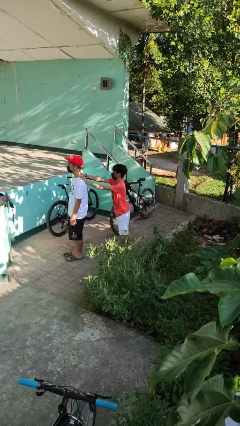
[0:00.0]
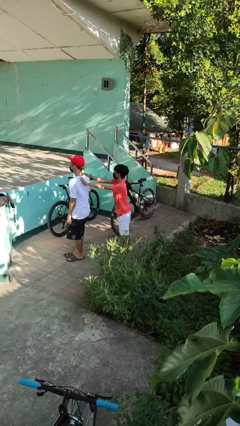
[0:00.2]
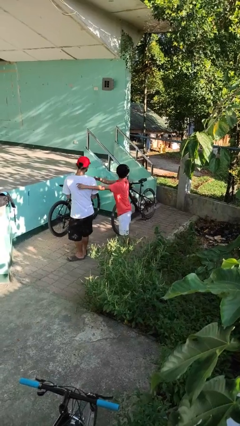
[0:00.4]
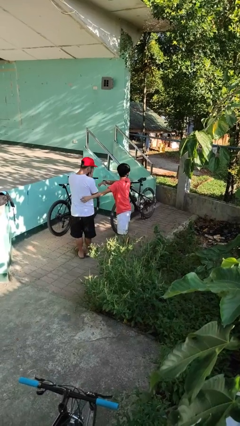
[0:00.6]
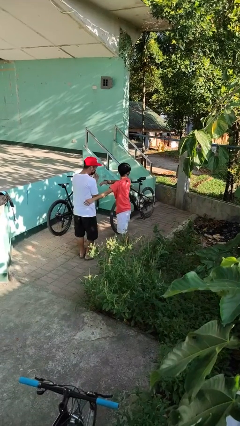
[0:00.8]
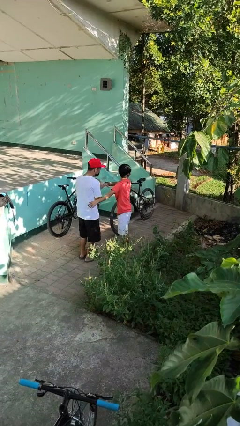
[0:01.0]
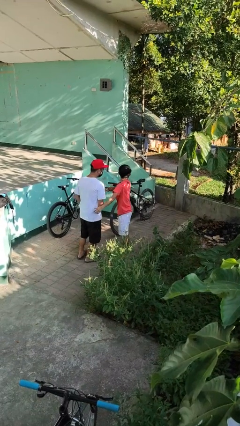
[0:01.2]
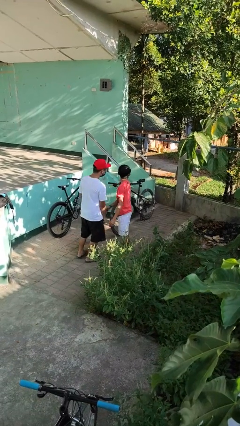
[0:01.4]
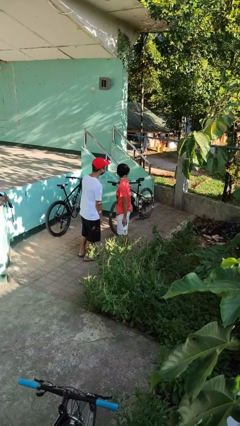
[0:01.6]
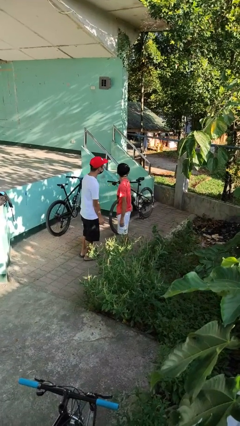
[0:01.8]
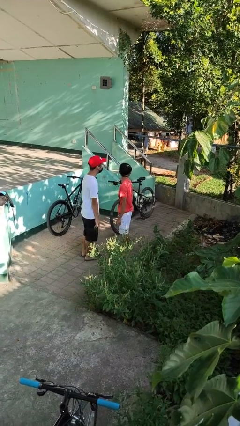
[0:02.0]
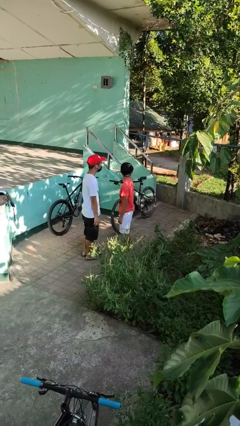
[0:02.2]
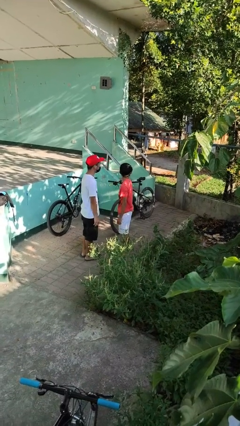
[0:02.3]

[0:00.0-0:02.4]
person spins person around

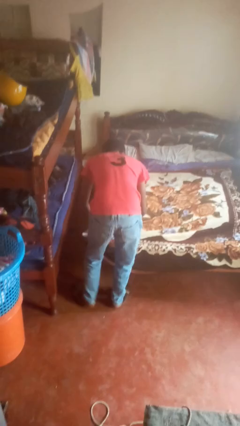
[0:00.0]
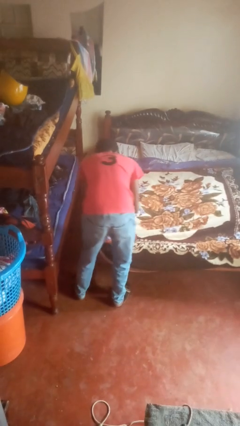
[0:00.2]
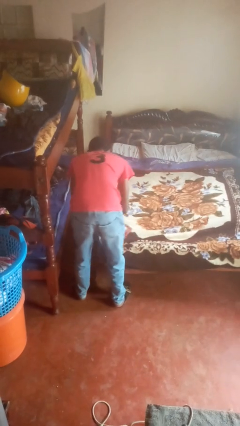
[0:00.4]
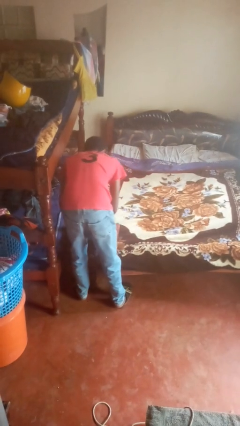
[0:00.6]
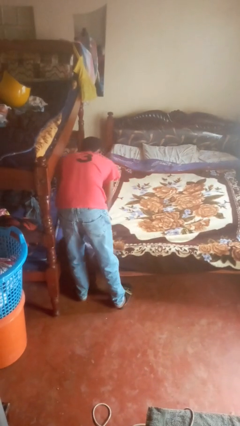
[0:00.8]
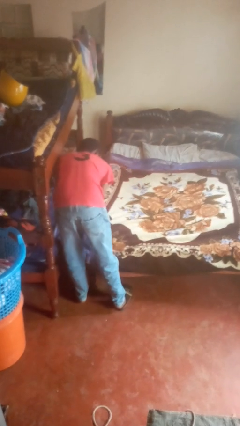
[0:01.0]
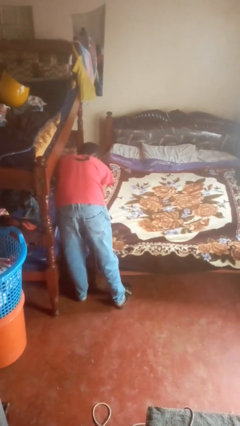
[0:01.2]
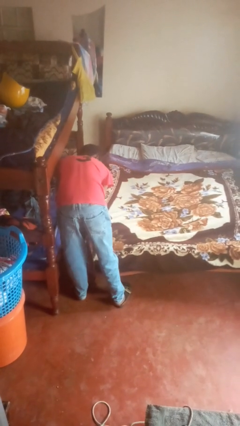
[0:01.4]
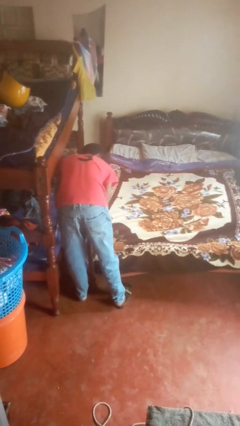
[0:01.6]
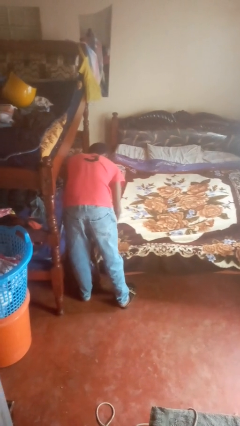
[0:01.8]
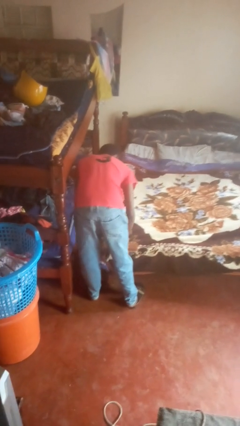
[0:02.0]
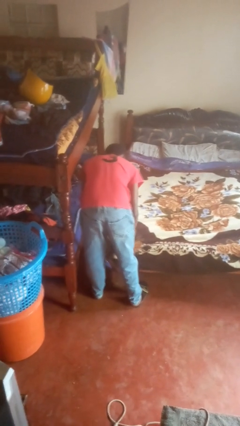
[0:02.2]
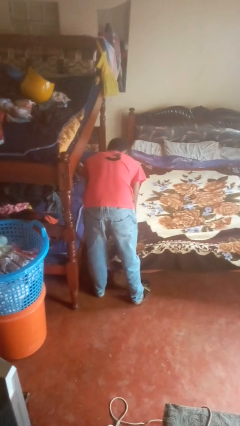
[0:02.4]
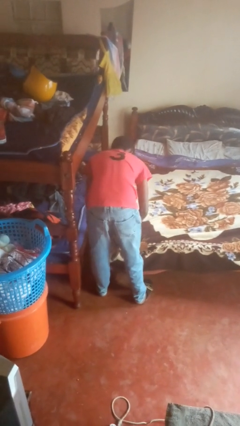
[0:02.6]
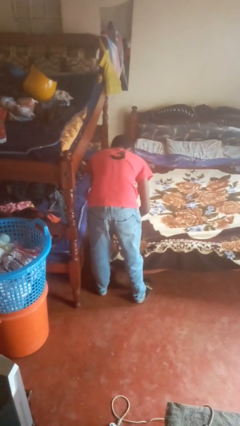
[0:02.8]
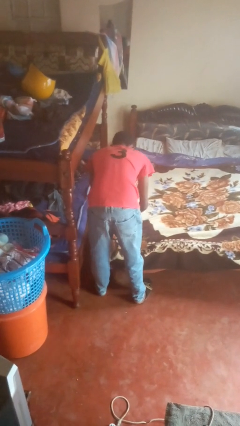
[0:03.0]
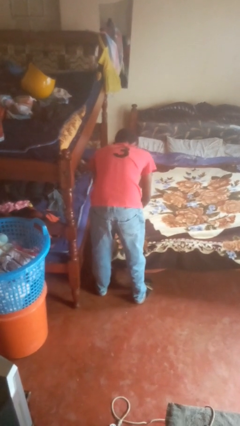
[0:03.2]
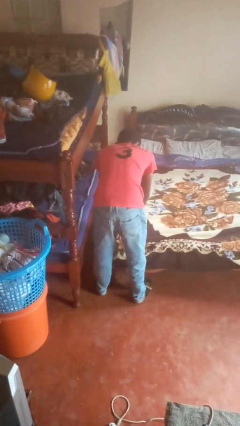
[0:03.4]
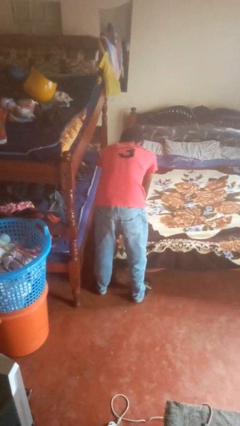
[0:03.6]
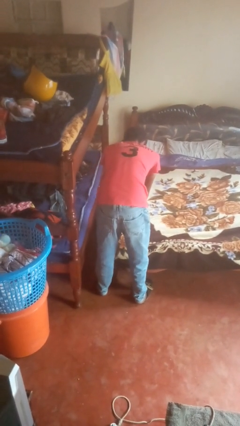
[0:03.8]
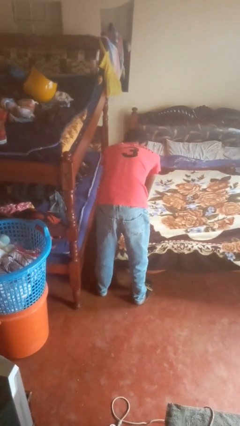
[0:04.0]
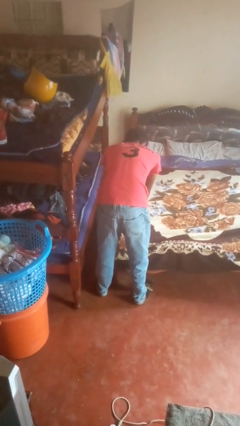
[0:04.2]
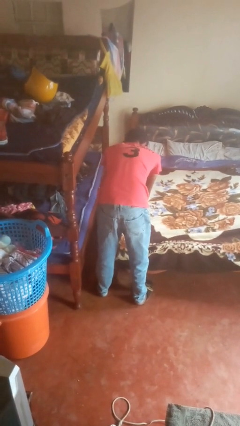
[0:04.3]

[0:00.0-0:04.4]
person makes bed

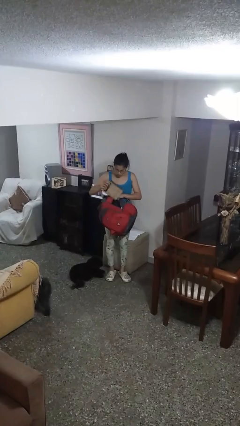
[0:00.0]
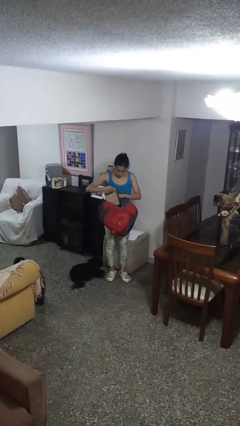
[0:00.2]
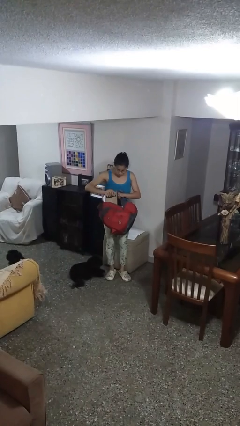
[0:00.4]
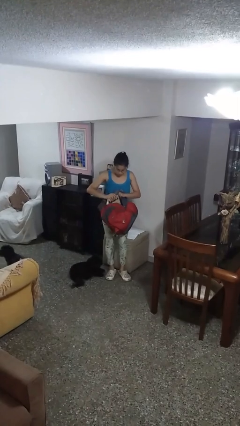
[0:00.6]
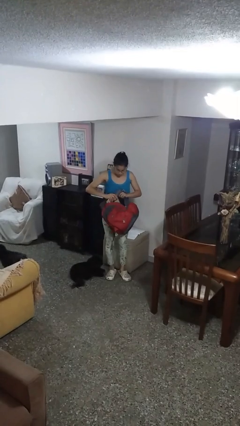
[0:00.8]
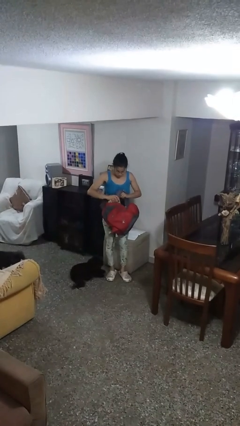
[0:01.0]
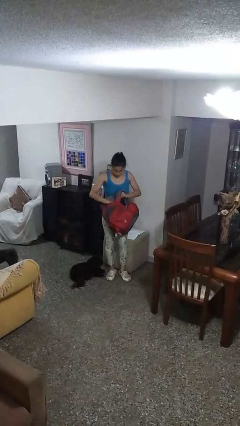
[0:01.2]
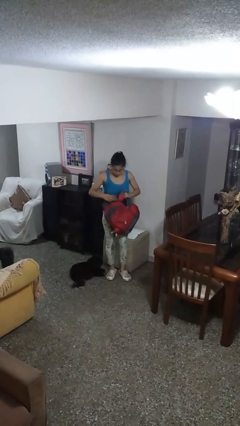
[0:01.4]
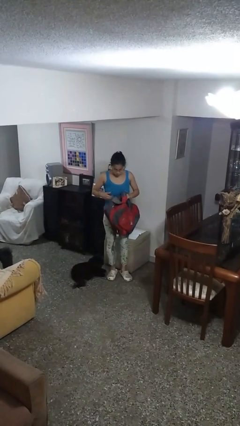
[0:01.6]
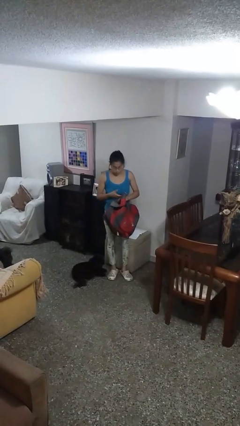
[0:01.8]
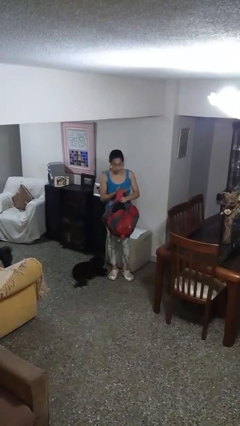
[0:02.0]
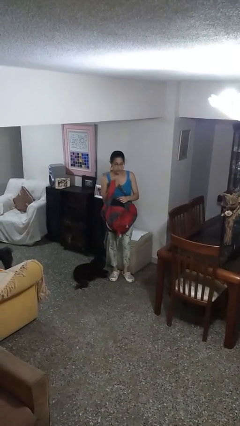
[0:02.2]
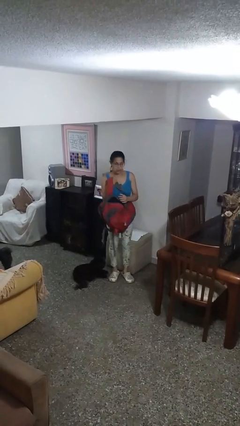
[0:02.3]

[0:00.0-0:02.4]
person puts object into backpack

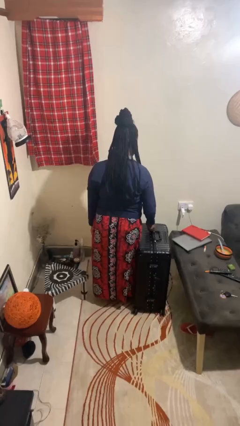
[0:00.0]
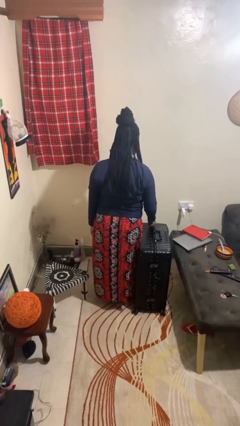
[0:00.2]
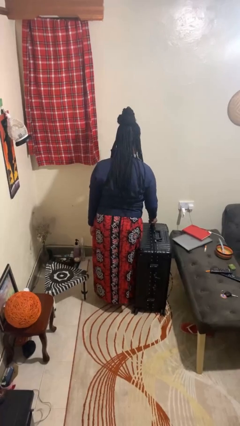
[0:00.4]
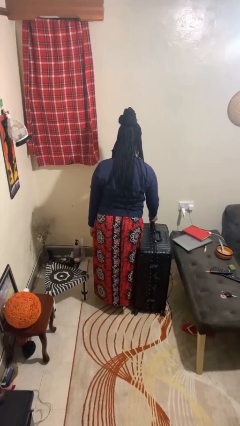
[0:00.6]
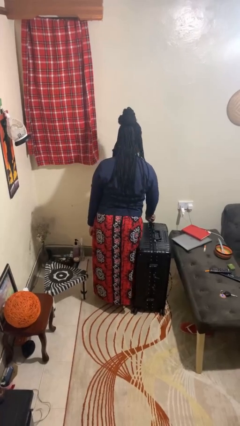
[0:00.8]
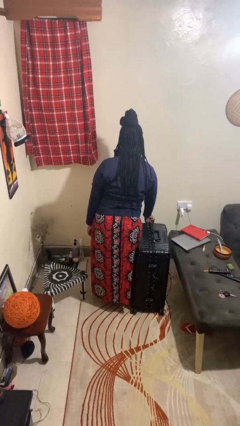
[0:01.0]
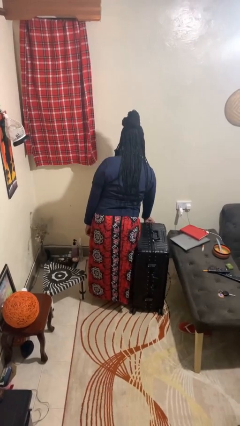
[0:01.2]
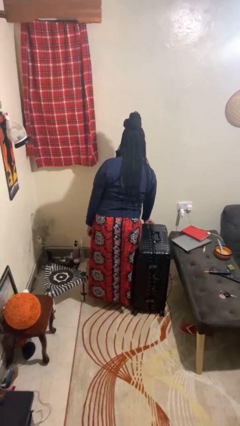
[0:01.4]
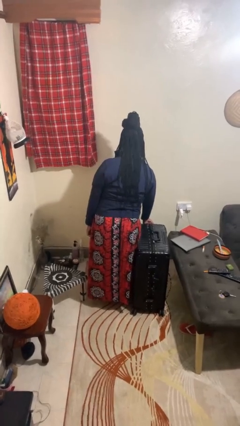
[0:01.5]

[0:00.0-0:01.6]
person closes suitcase

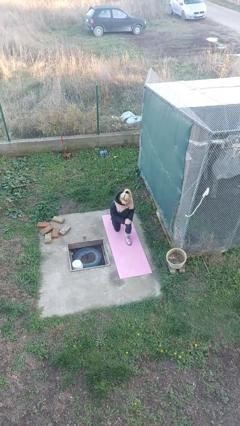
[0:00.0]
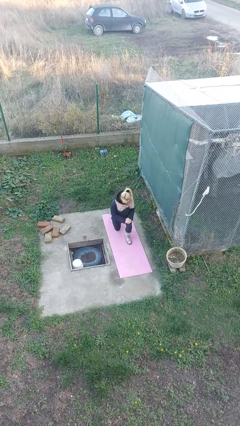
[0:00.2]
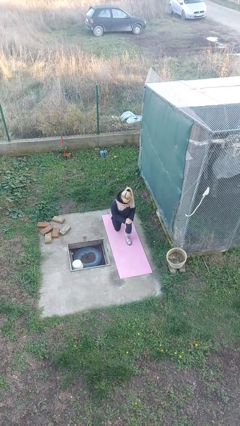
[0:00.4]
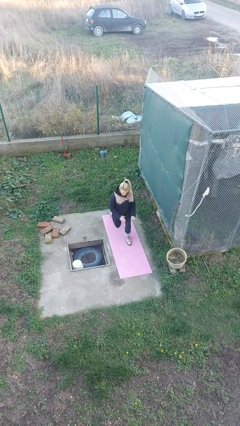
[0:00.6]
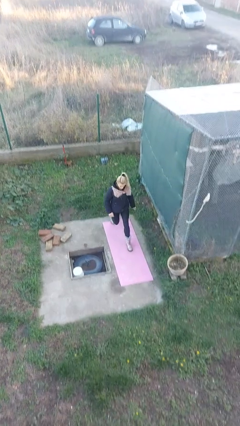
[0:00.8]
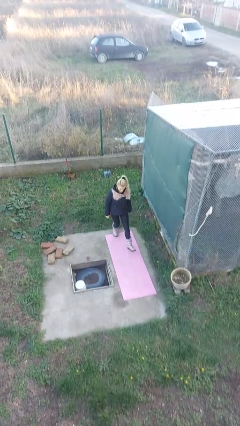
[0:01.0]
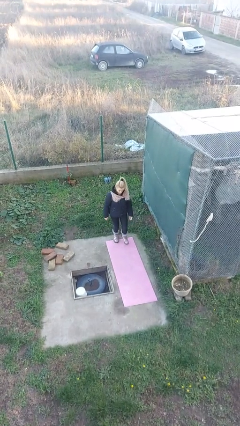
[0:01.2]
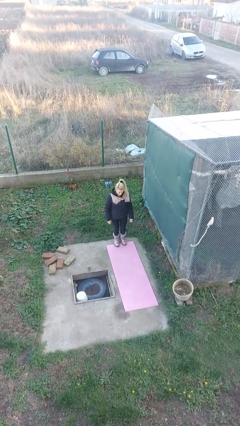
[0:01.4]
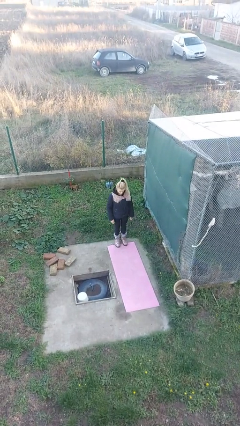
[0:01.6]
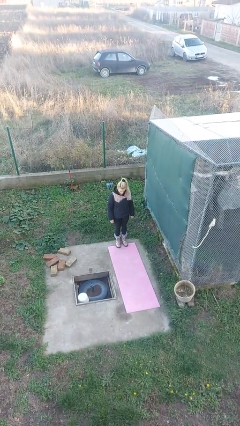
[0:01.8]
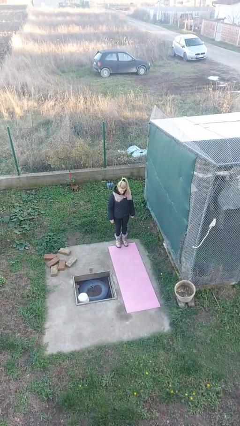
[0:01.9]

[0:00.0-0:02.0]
person stands up from floor

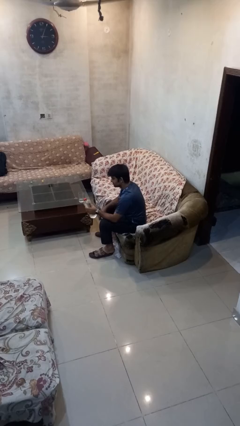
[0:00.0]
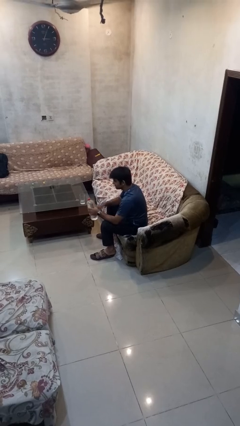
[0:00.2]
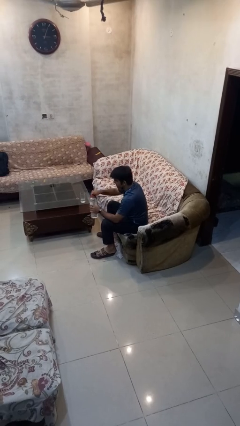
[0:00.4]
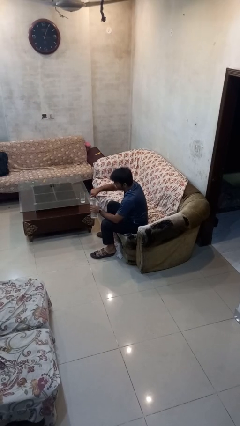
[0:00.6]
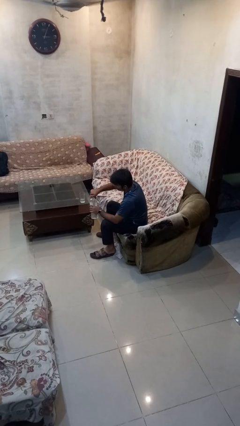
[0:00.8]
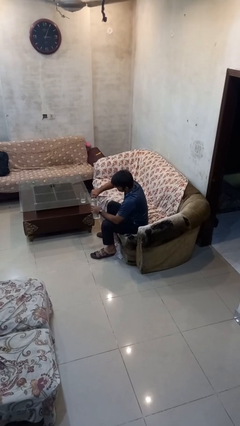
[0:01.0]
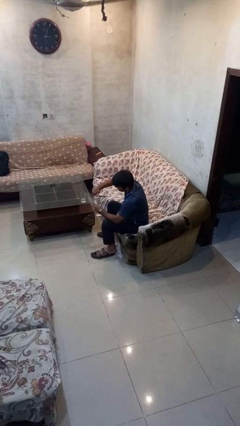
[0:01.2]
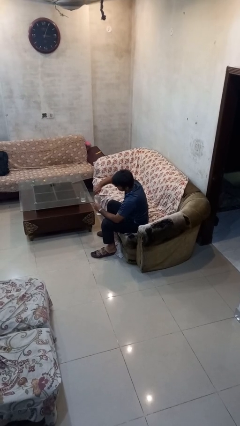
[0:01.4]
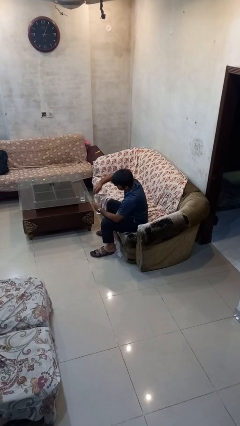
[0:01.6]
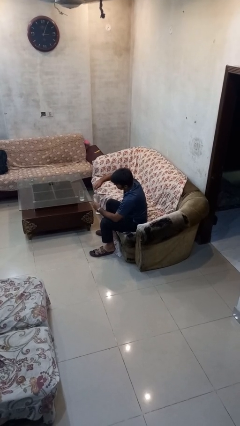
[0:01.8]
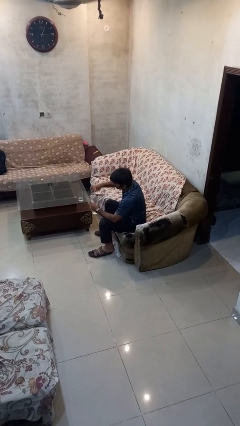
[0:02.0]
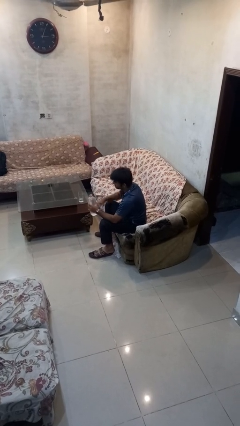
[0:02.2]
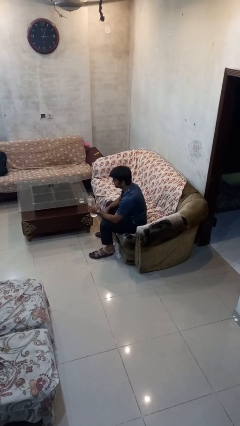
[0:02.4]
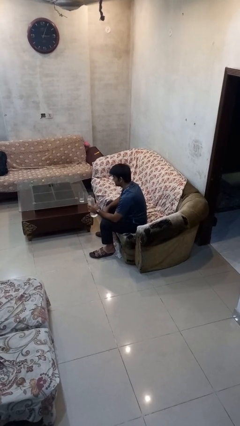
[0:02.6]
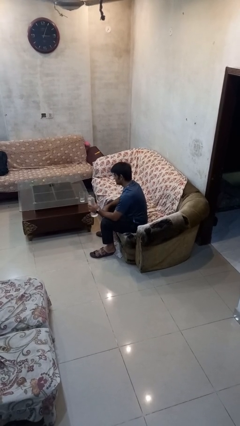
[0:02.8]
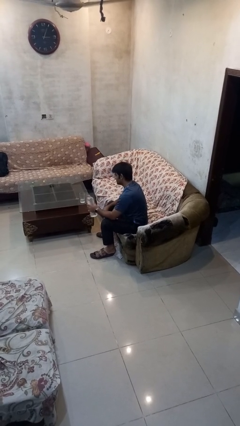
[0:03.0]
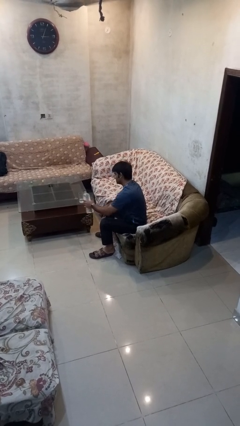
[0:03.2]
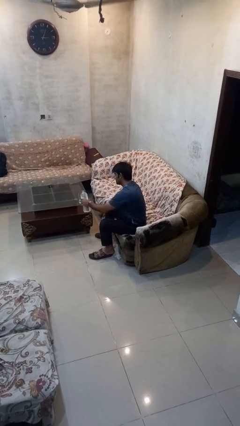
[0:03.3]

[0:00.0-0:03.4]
person unscrews lid from bottle

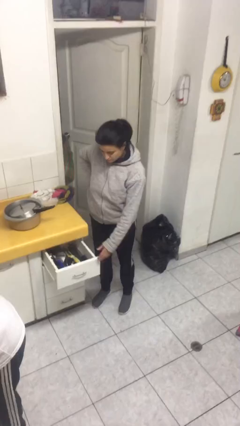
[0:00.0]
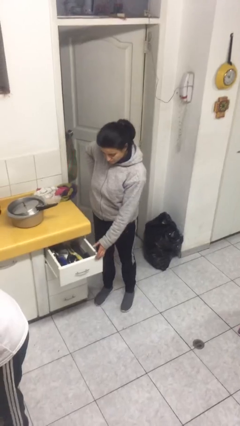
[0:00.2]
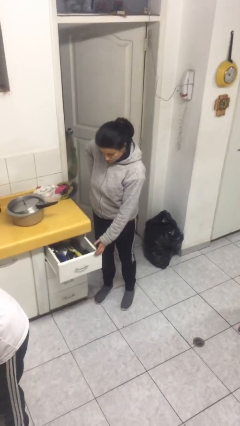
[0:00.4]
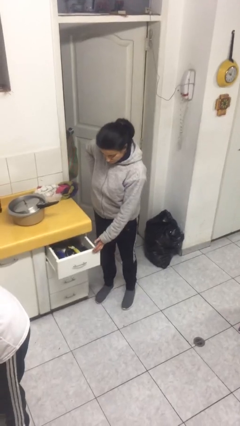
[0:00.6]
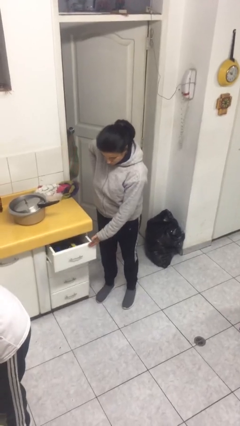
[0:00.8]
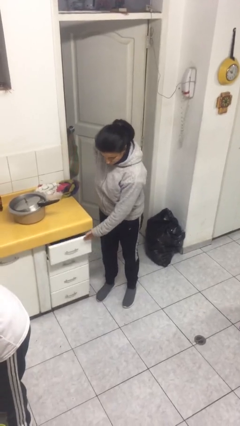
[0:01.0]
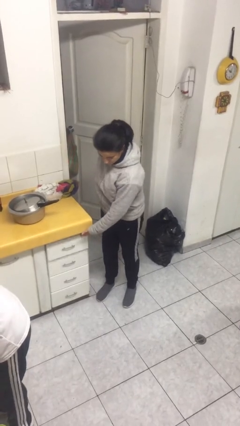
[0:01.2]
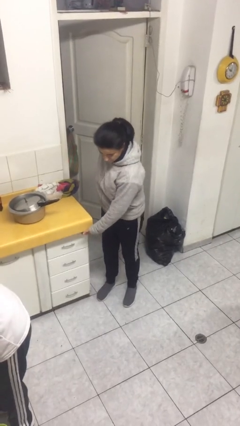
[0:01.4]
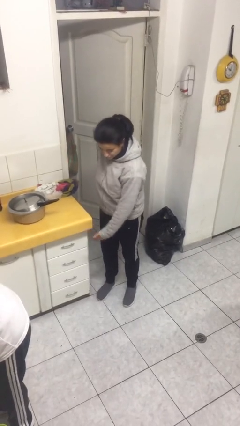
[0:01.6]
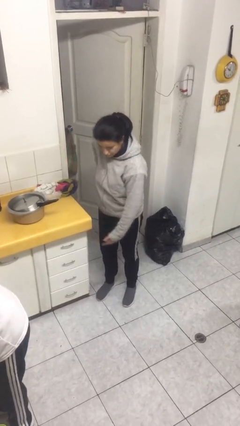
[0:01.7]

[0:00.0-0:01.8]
person closes kitchen drawer
